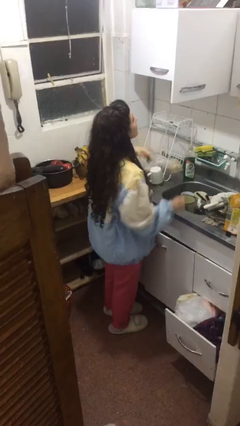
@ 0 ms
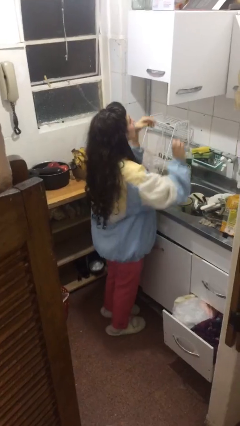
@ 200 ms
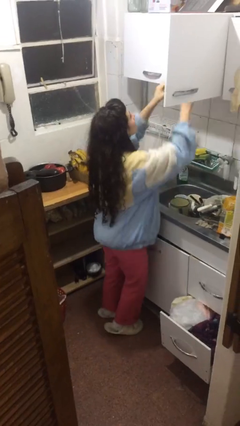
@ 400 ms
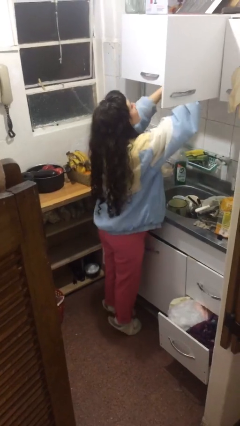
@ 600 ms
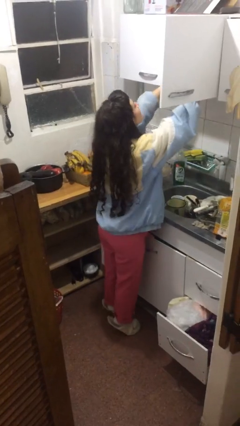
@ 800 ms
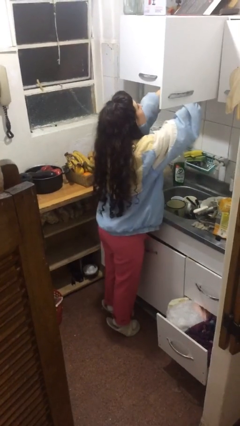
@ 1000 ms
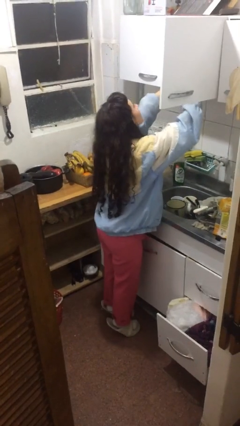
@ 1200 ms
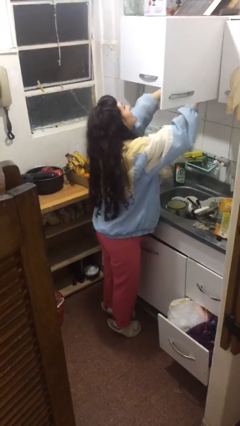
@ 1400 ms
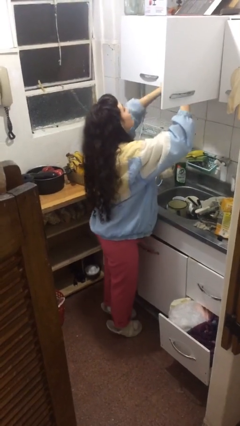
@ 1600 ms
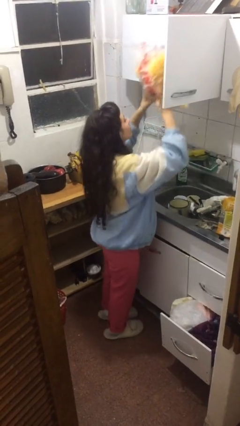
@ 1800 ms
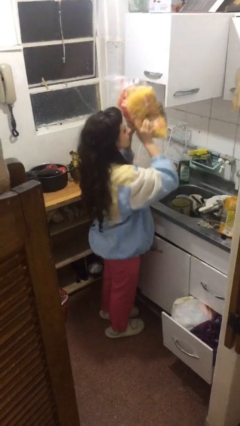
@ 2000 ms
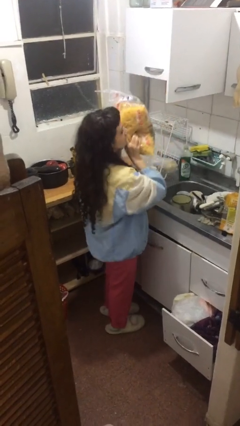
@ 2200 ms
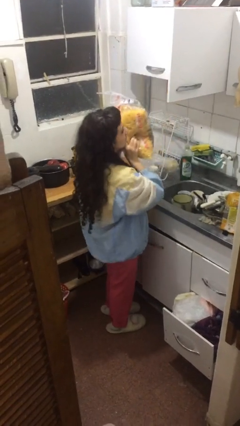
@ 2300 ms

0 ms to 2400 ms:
person picks up object from cabinet

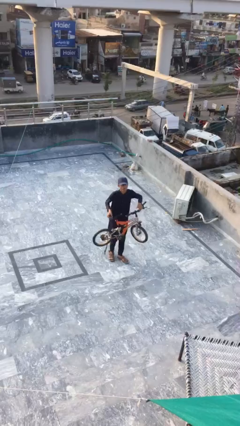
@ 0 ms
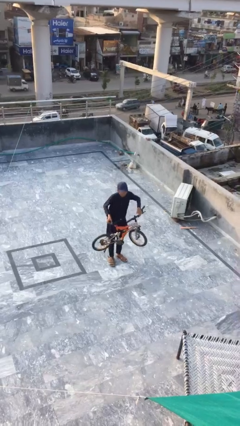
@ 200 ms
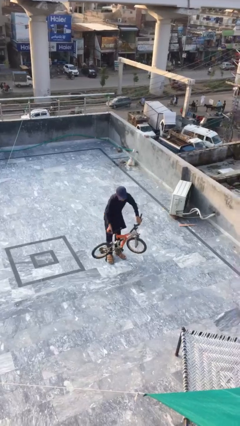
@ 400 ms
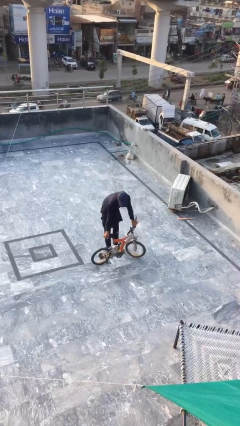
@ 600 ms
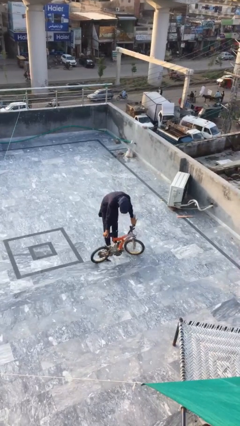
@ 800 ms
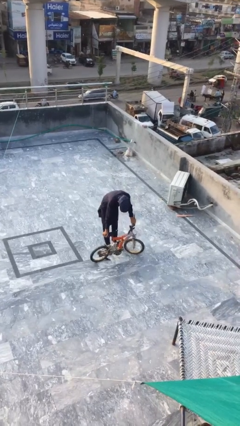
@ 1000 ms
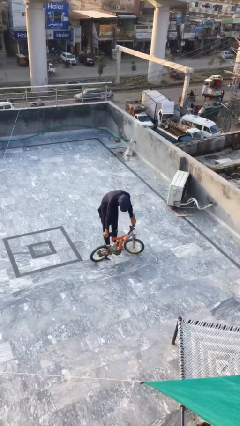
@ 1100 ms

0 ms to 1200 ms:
person puts down object on floor

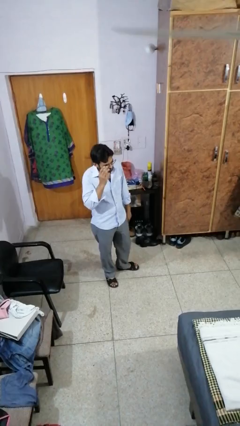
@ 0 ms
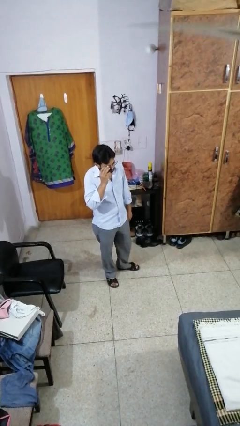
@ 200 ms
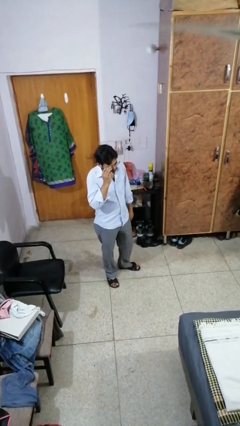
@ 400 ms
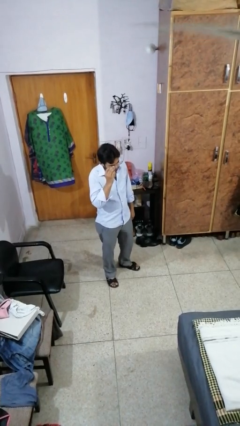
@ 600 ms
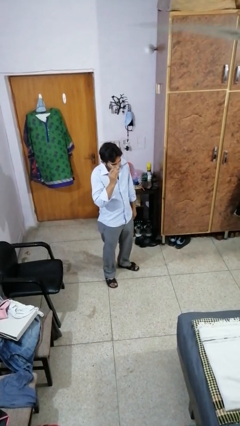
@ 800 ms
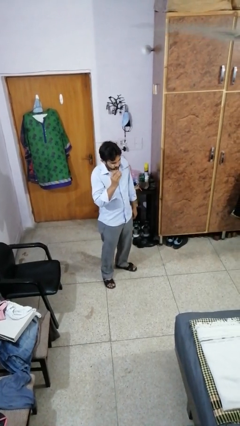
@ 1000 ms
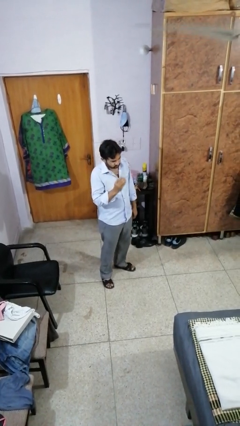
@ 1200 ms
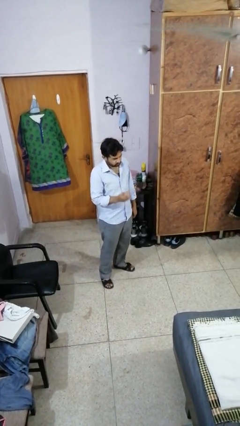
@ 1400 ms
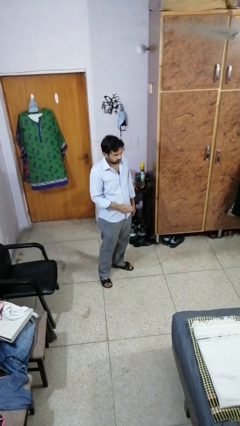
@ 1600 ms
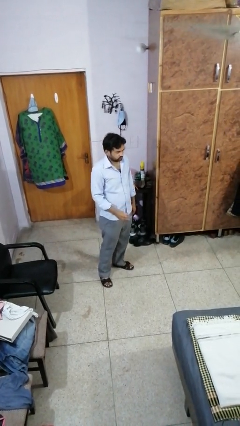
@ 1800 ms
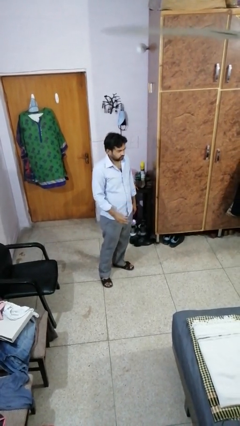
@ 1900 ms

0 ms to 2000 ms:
person takes off glasses

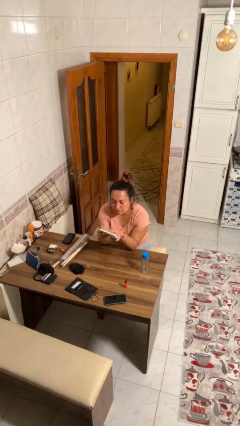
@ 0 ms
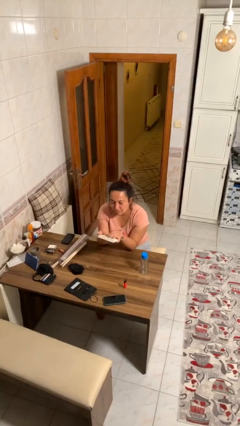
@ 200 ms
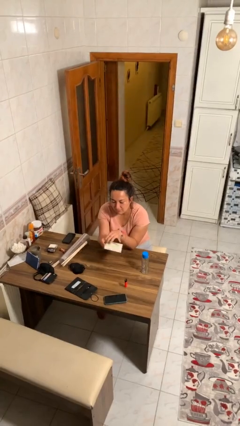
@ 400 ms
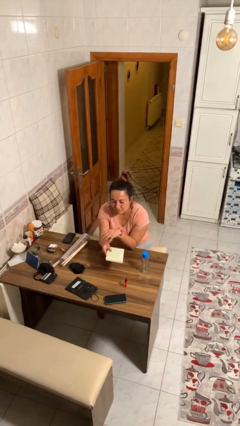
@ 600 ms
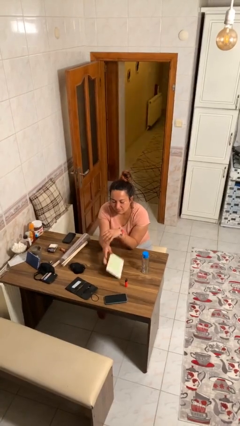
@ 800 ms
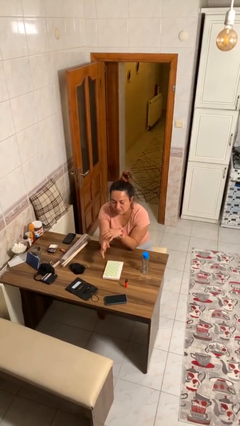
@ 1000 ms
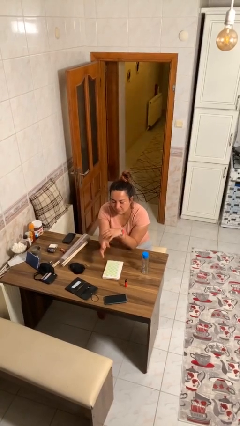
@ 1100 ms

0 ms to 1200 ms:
person puts down object on table

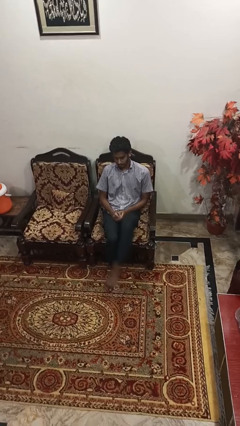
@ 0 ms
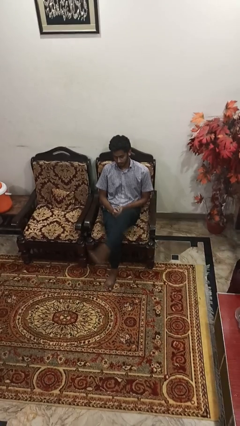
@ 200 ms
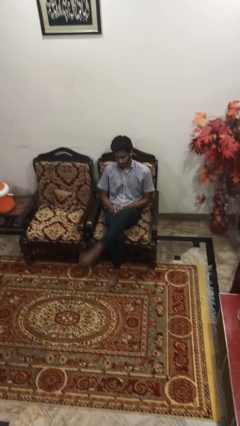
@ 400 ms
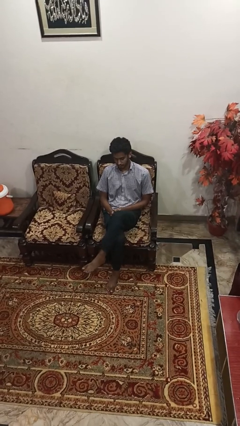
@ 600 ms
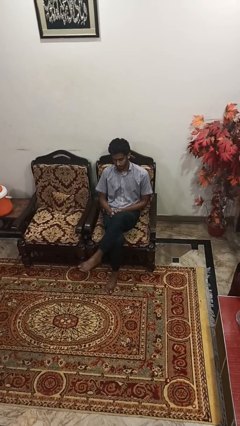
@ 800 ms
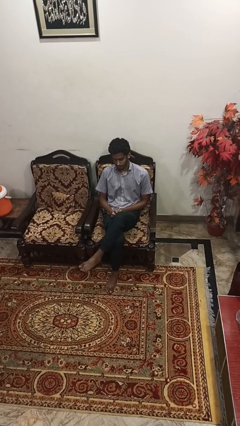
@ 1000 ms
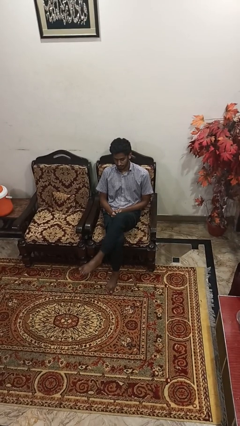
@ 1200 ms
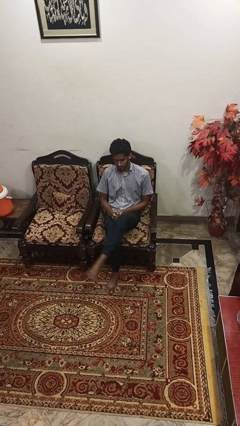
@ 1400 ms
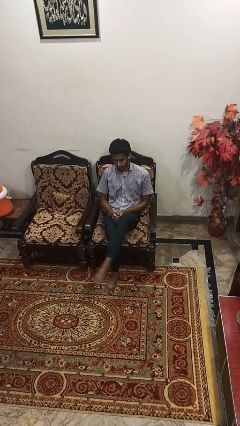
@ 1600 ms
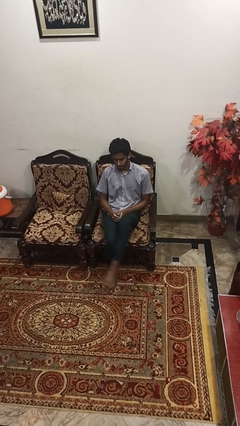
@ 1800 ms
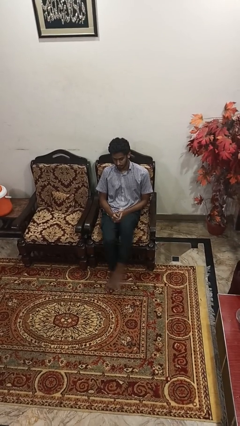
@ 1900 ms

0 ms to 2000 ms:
person crosses legs

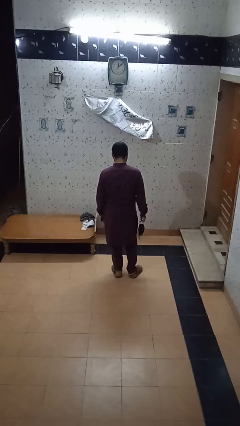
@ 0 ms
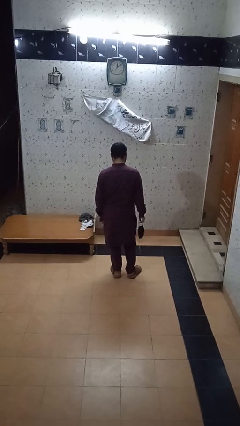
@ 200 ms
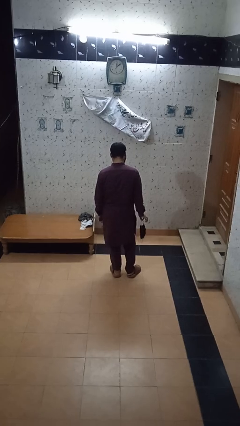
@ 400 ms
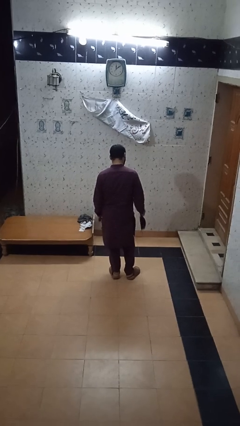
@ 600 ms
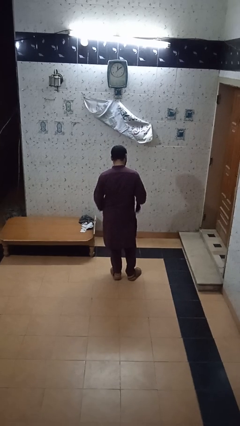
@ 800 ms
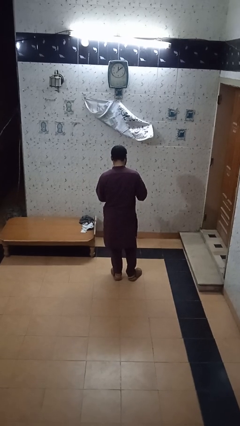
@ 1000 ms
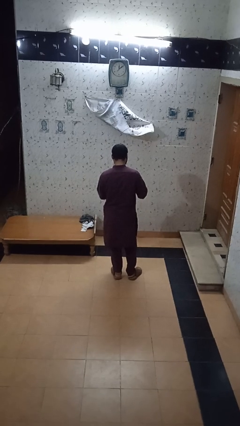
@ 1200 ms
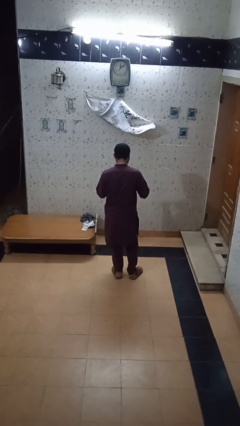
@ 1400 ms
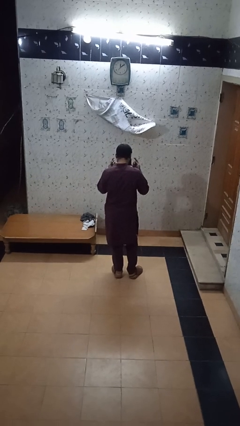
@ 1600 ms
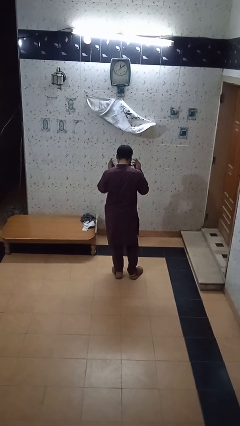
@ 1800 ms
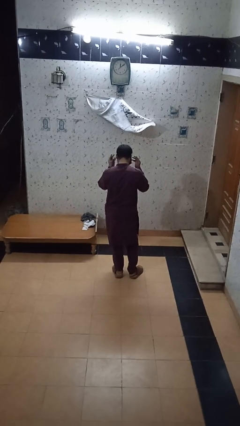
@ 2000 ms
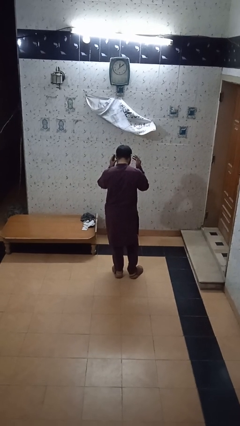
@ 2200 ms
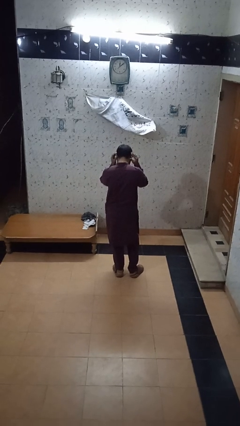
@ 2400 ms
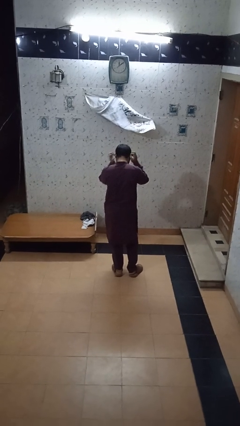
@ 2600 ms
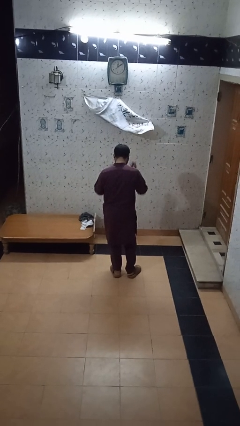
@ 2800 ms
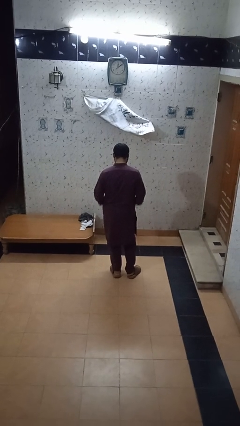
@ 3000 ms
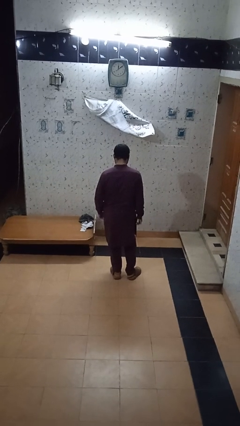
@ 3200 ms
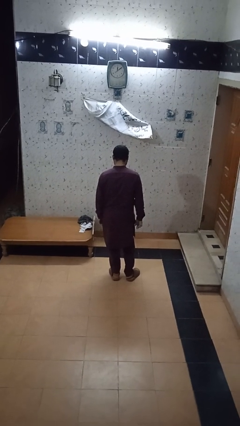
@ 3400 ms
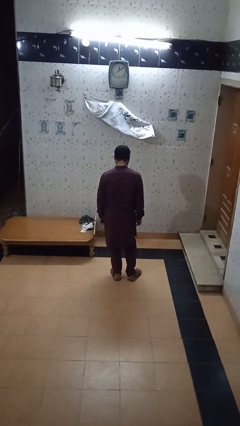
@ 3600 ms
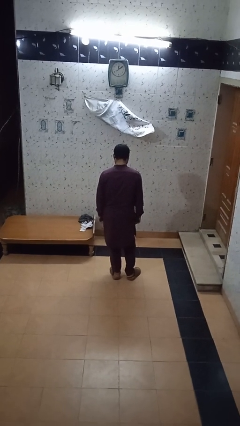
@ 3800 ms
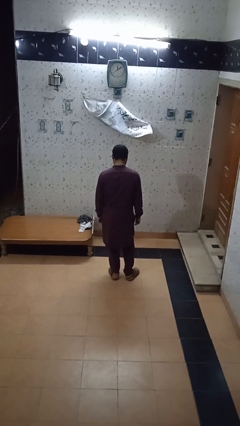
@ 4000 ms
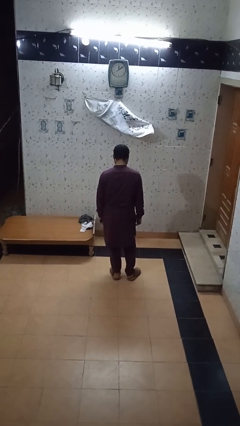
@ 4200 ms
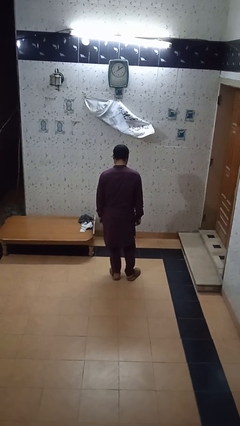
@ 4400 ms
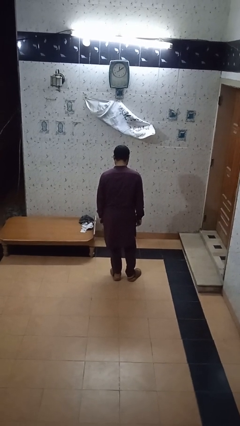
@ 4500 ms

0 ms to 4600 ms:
person puts on facemask

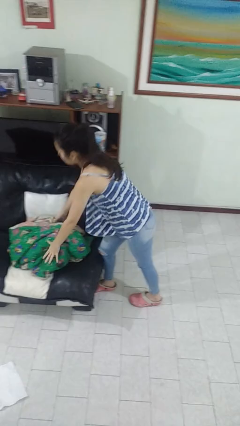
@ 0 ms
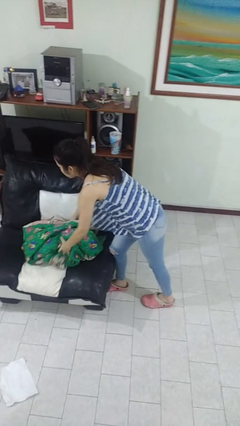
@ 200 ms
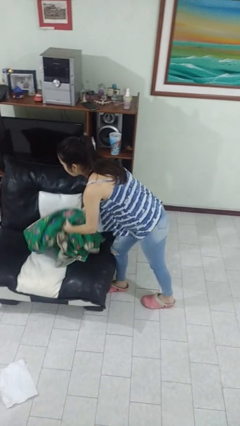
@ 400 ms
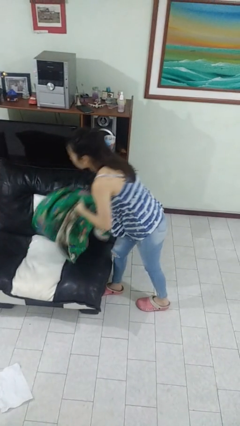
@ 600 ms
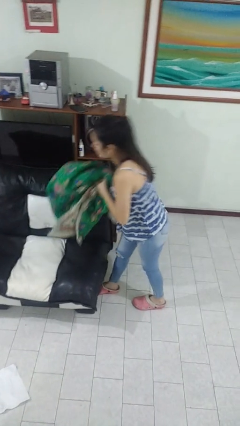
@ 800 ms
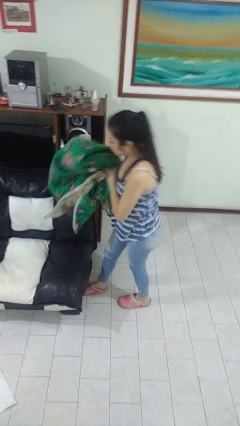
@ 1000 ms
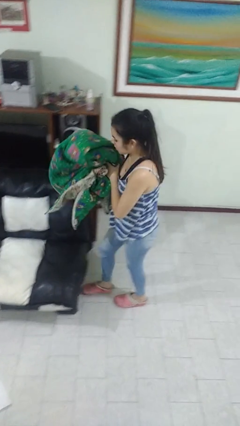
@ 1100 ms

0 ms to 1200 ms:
person picks up object from couch

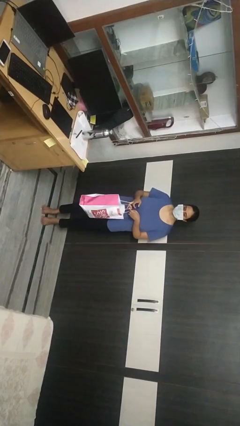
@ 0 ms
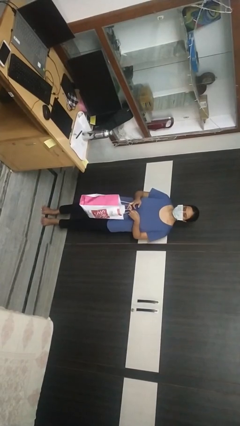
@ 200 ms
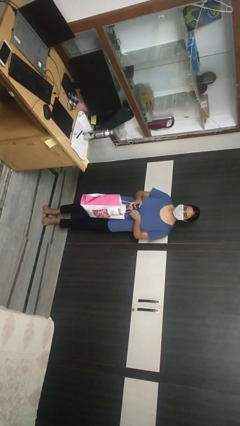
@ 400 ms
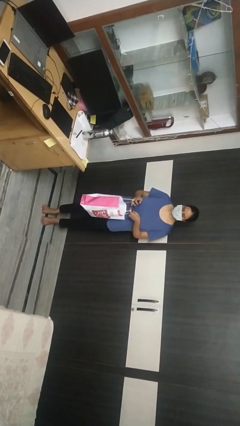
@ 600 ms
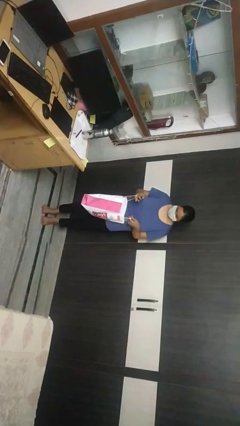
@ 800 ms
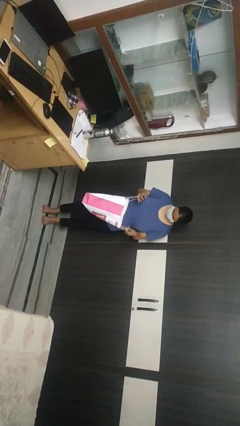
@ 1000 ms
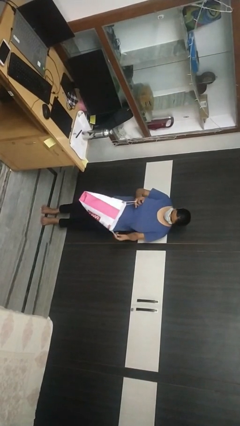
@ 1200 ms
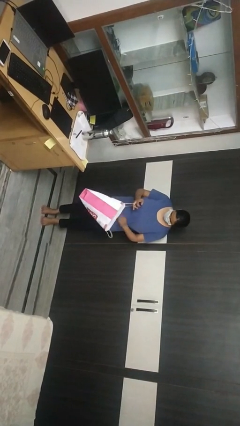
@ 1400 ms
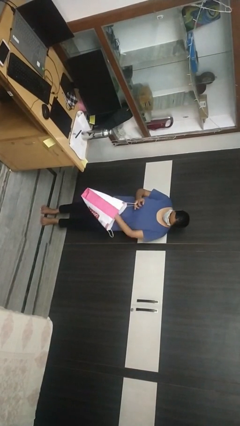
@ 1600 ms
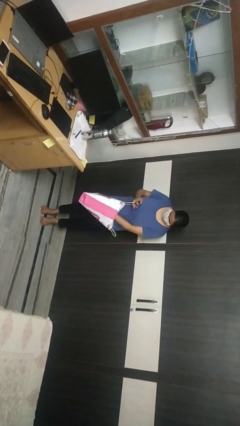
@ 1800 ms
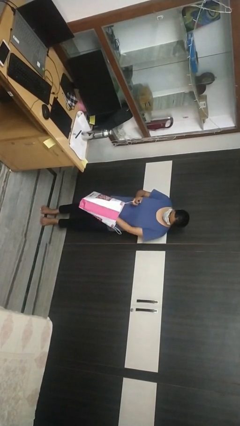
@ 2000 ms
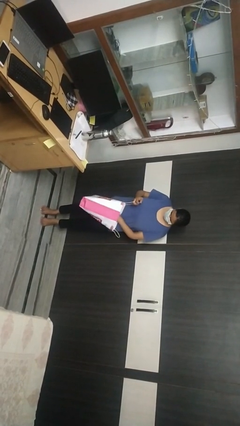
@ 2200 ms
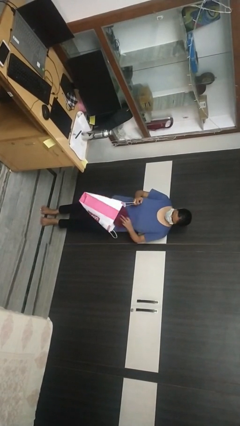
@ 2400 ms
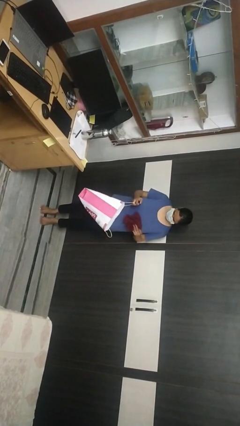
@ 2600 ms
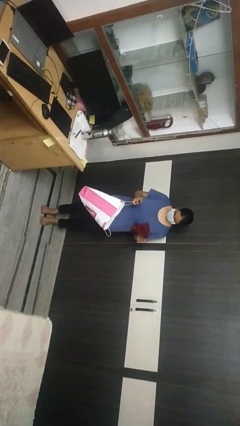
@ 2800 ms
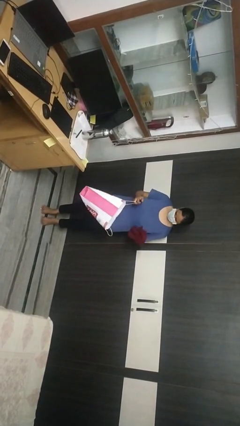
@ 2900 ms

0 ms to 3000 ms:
person takes object from bag
